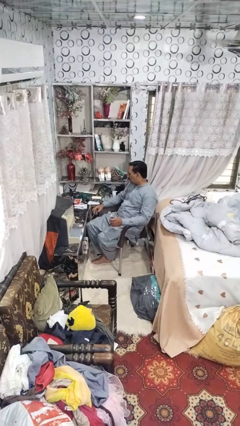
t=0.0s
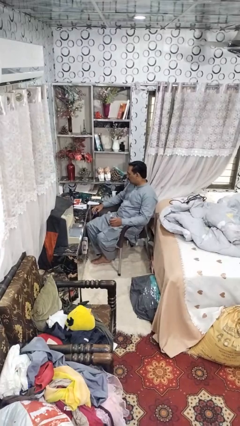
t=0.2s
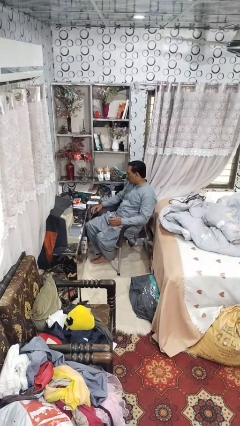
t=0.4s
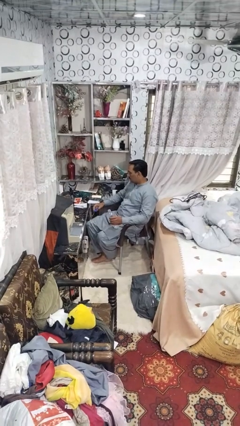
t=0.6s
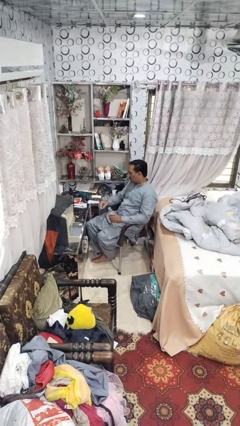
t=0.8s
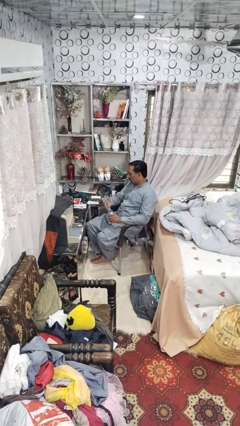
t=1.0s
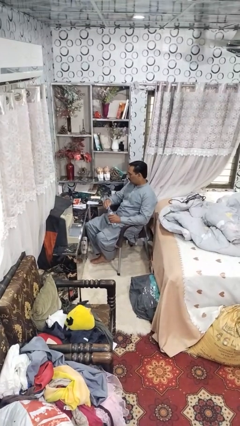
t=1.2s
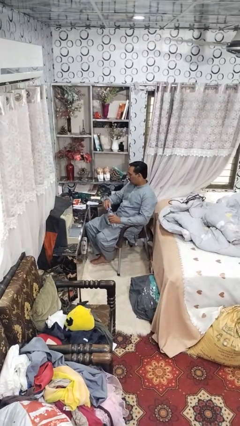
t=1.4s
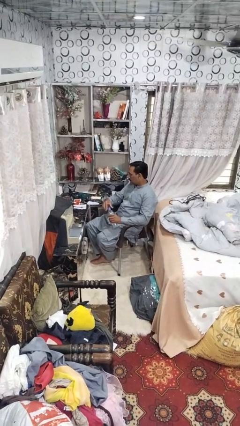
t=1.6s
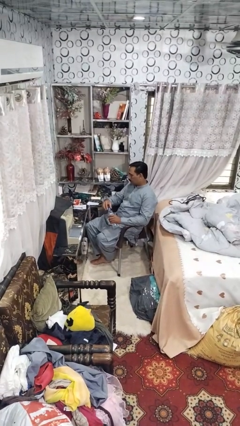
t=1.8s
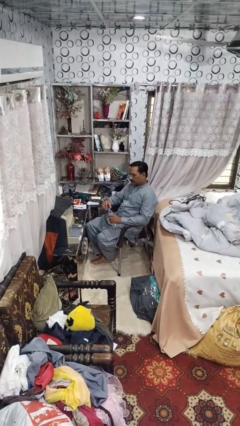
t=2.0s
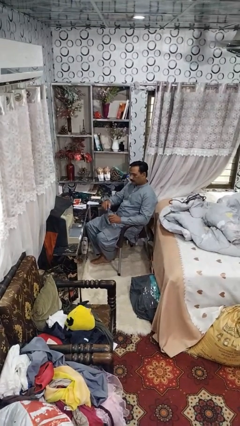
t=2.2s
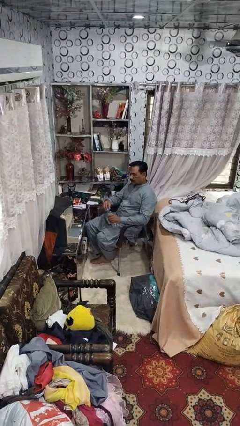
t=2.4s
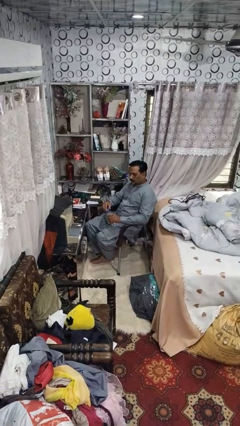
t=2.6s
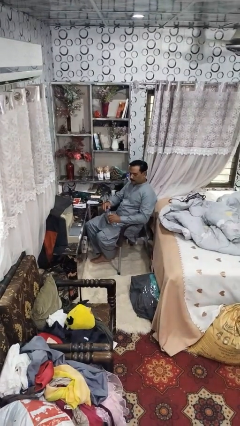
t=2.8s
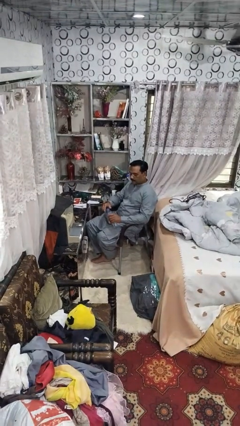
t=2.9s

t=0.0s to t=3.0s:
person screws lid to bottle

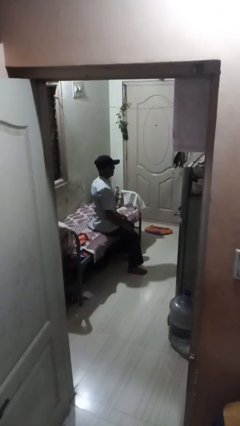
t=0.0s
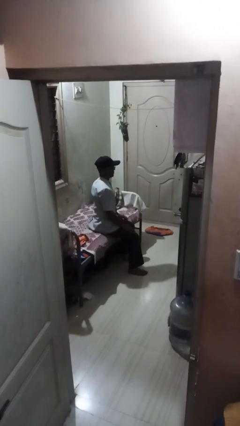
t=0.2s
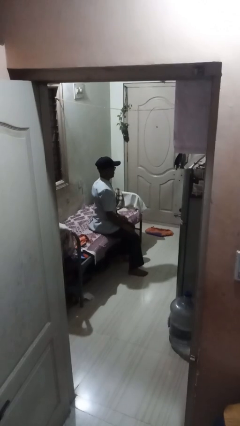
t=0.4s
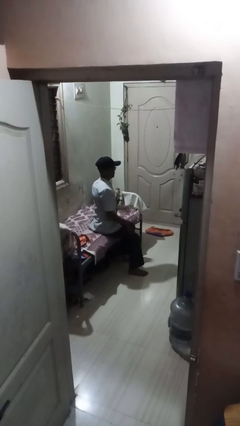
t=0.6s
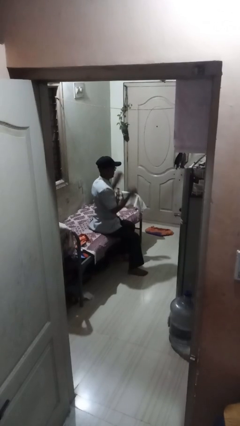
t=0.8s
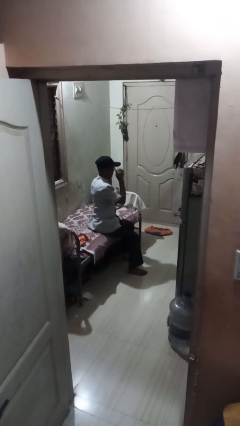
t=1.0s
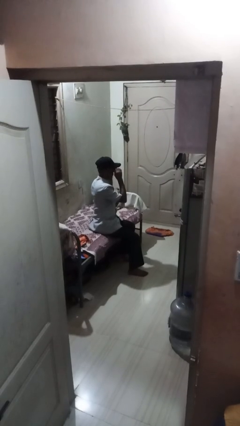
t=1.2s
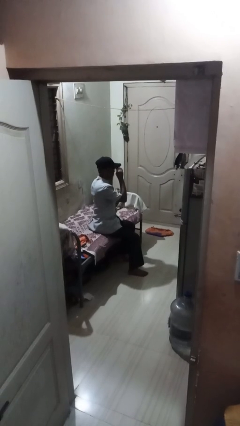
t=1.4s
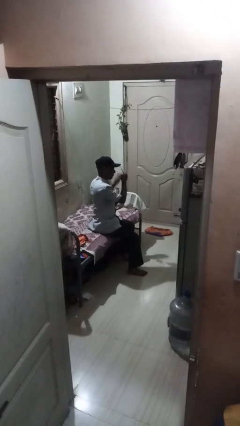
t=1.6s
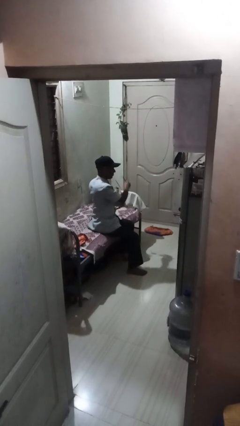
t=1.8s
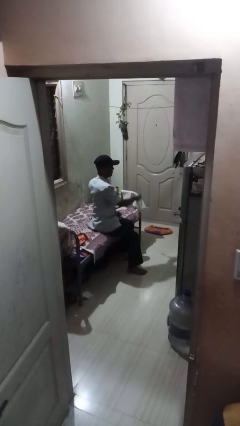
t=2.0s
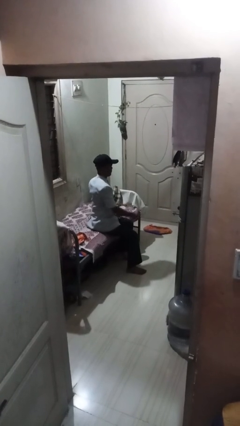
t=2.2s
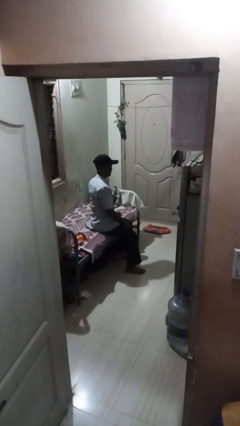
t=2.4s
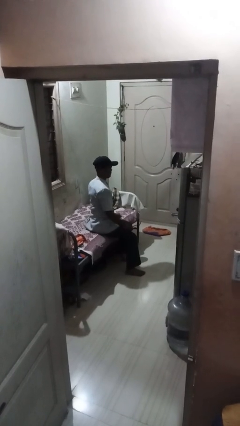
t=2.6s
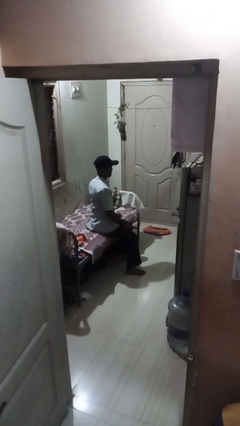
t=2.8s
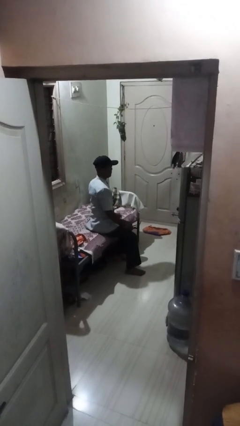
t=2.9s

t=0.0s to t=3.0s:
person takes off glasses

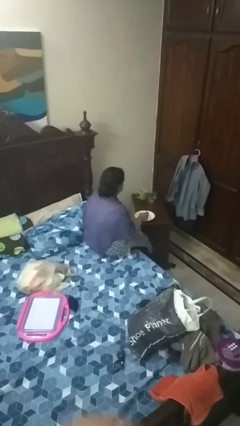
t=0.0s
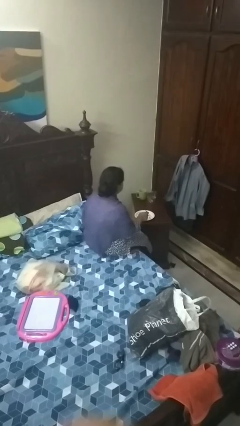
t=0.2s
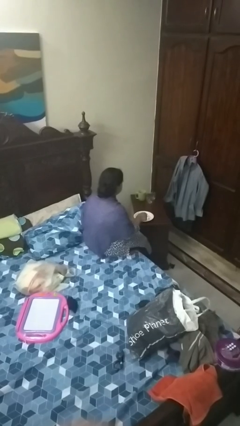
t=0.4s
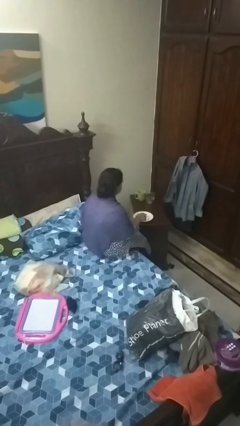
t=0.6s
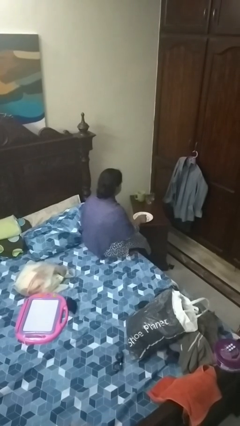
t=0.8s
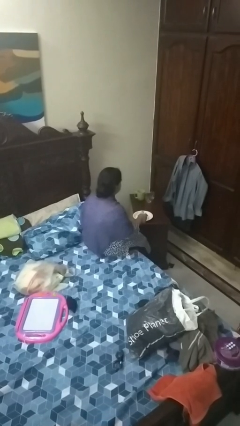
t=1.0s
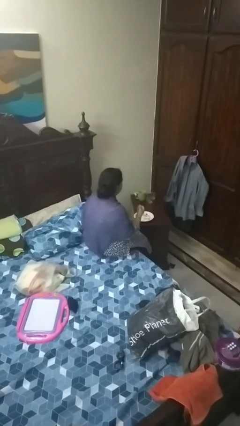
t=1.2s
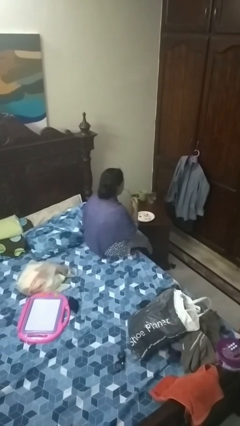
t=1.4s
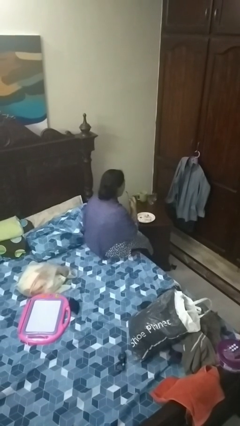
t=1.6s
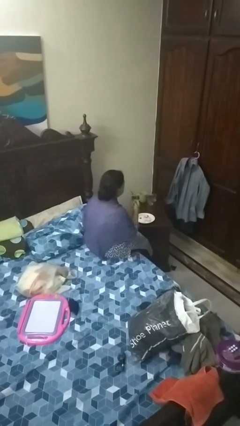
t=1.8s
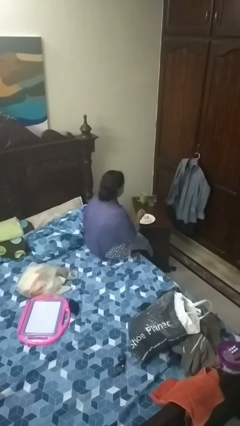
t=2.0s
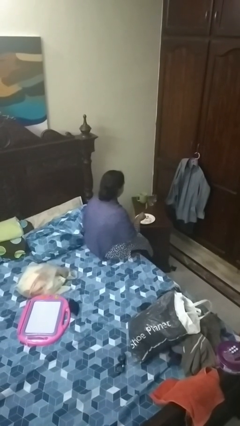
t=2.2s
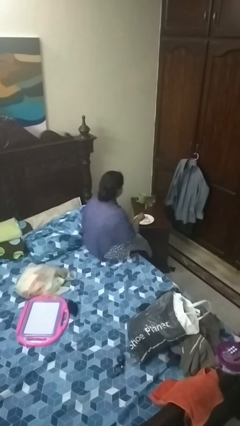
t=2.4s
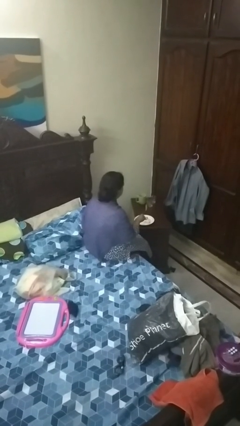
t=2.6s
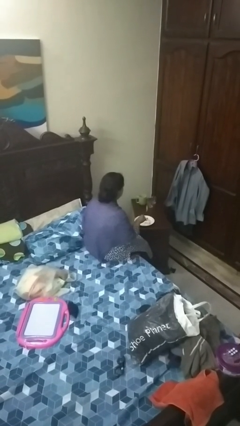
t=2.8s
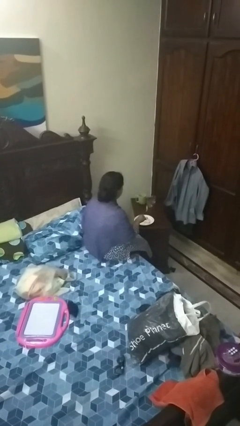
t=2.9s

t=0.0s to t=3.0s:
person eats with utensil

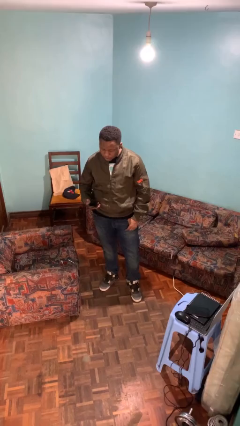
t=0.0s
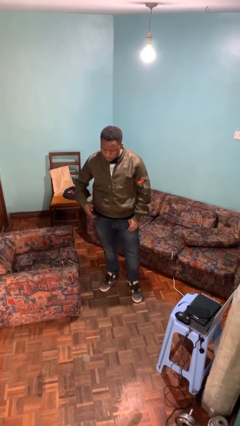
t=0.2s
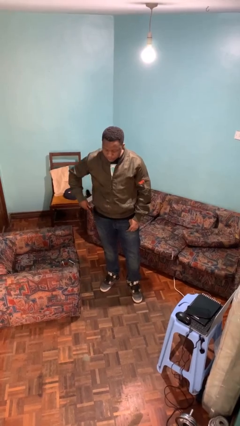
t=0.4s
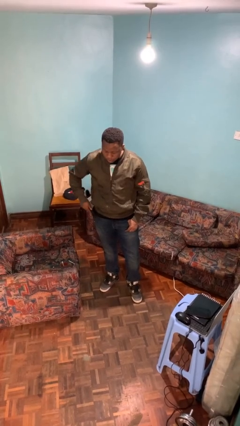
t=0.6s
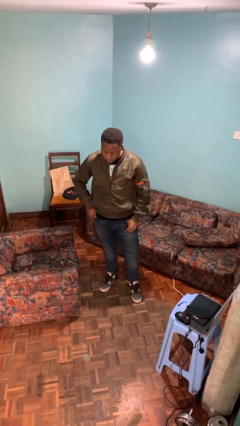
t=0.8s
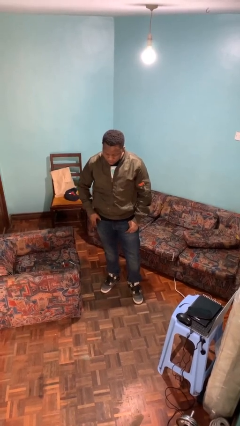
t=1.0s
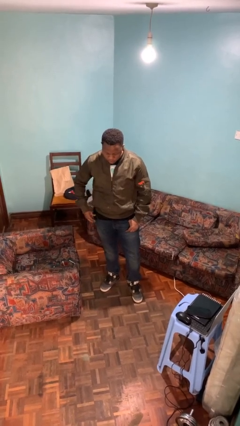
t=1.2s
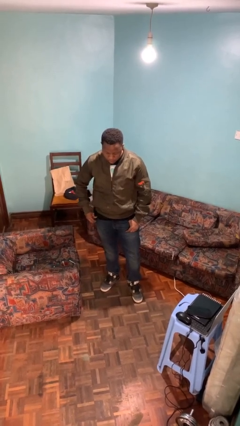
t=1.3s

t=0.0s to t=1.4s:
person puts phone into pocket

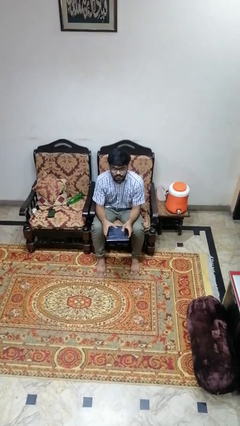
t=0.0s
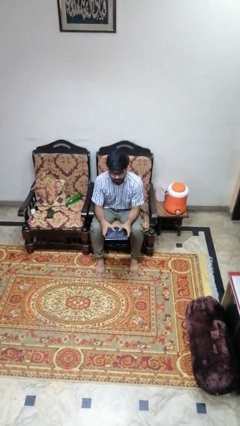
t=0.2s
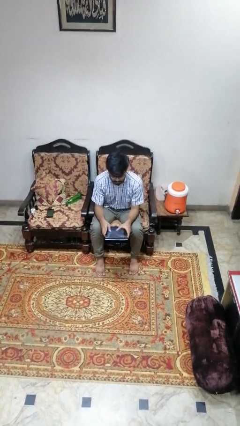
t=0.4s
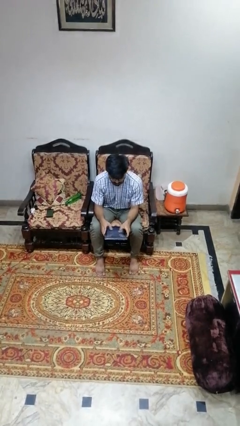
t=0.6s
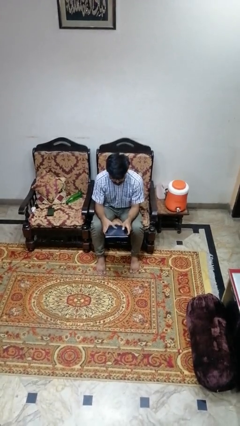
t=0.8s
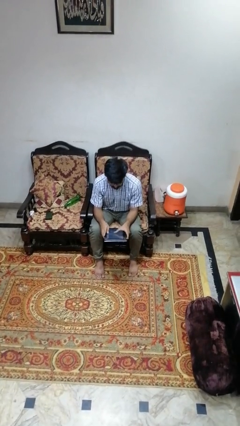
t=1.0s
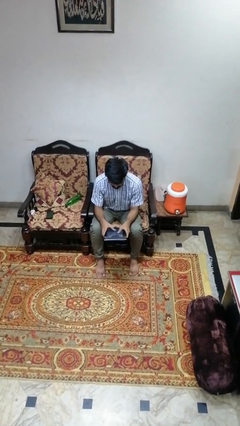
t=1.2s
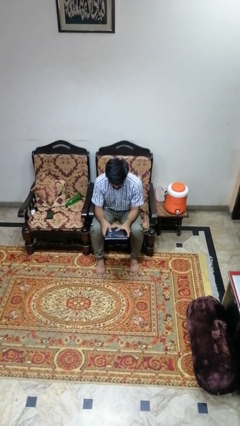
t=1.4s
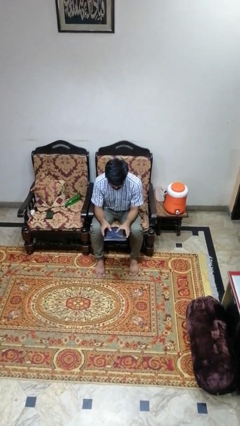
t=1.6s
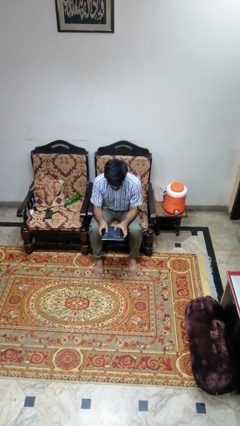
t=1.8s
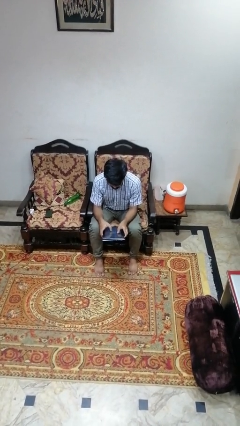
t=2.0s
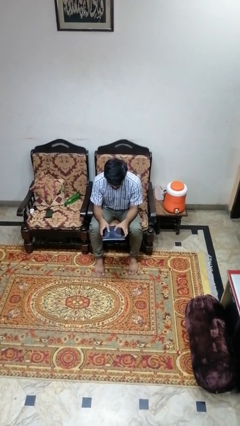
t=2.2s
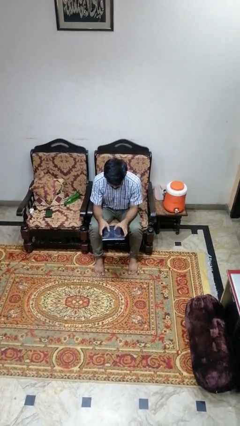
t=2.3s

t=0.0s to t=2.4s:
person interacts with tablet

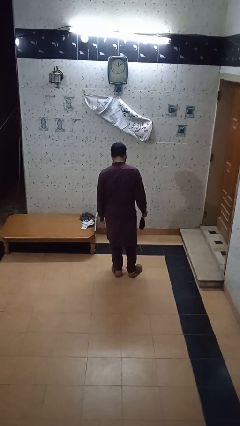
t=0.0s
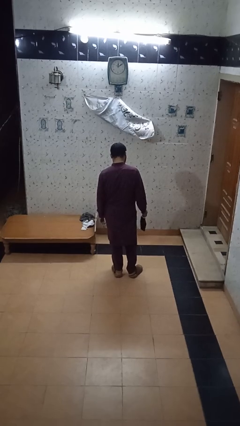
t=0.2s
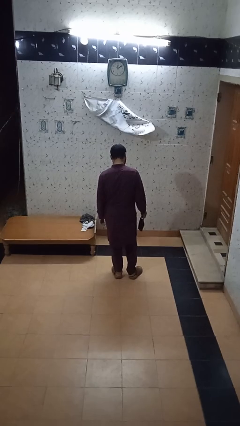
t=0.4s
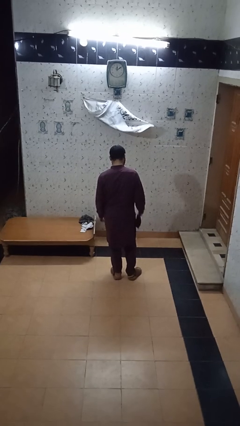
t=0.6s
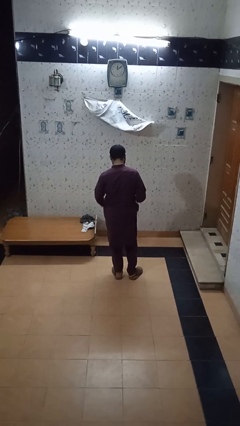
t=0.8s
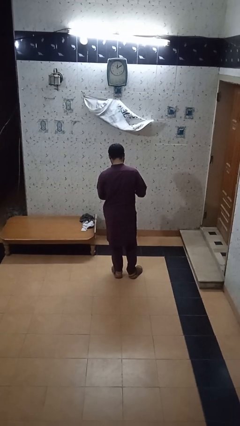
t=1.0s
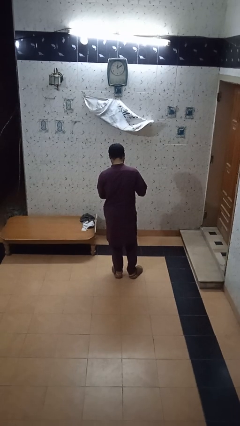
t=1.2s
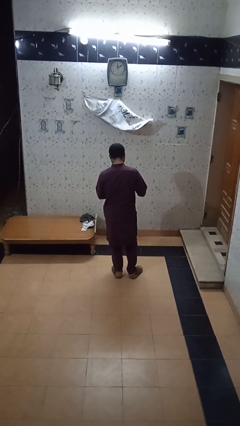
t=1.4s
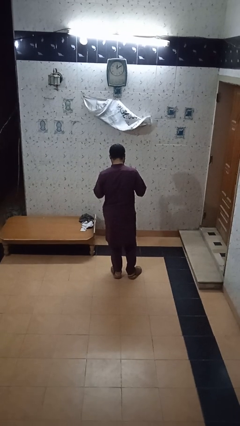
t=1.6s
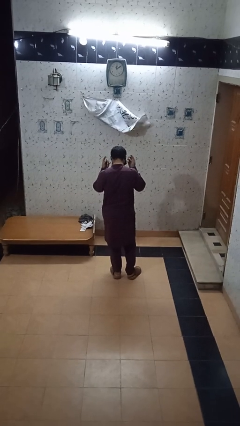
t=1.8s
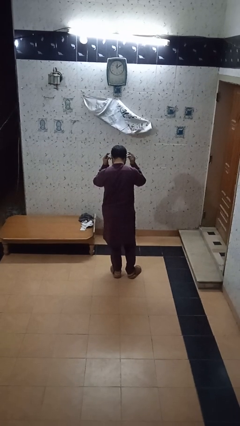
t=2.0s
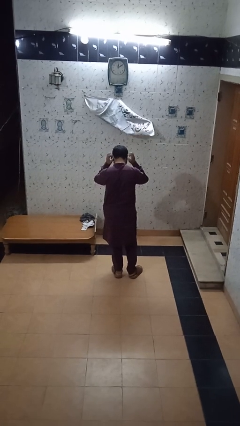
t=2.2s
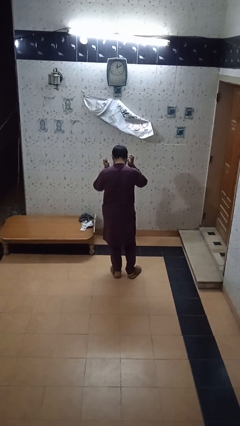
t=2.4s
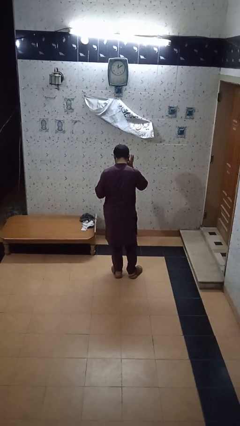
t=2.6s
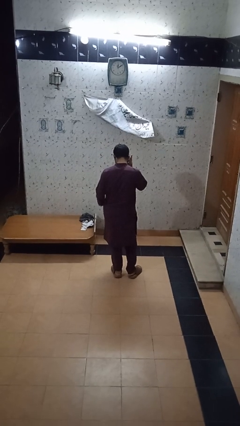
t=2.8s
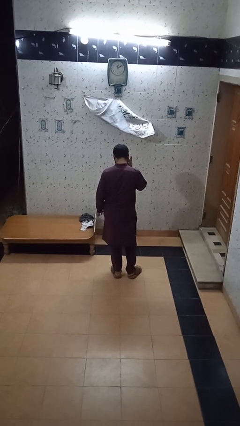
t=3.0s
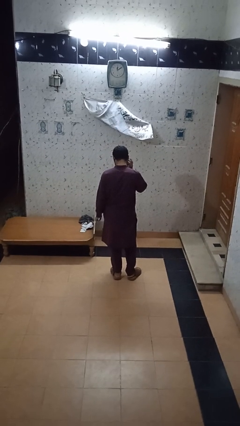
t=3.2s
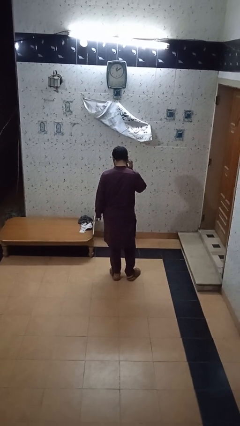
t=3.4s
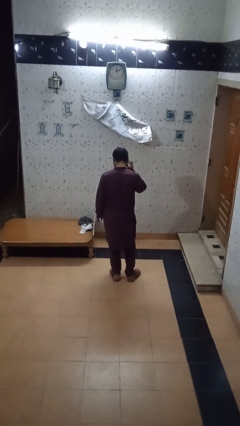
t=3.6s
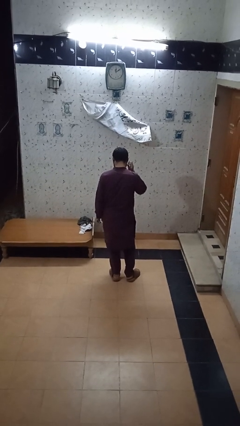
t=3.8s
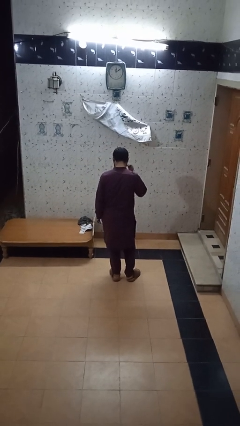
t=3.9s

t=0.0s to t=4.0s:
person puts on facemask
